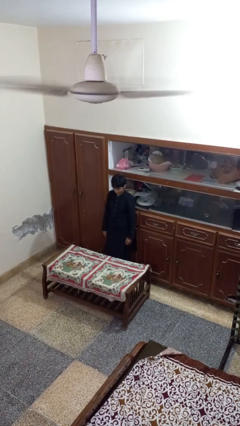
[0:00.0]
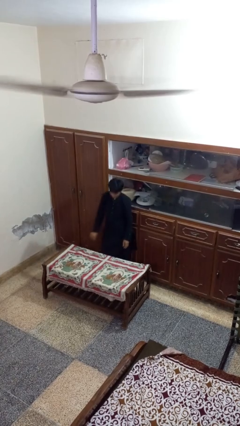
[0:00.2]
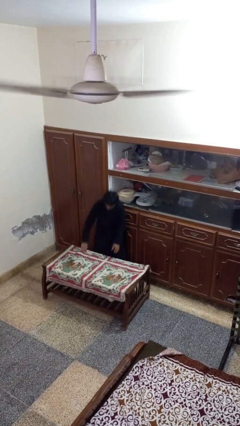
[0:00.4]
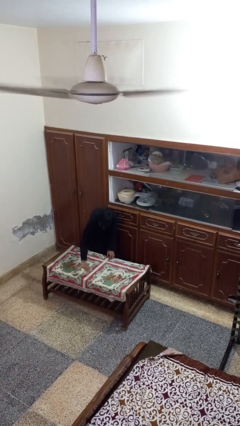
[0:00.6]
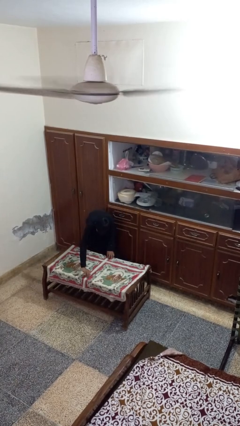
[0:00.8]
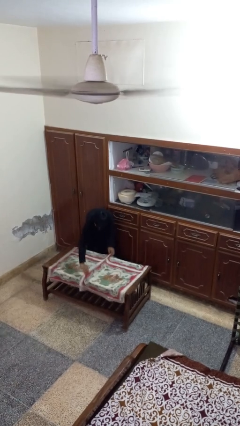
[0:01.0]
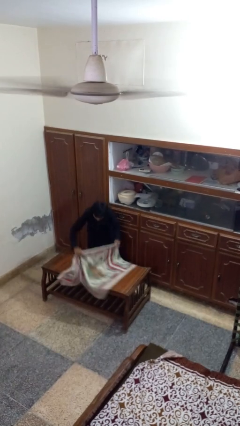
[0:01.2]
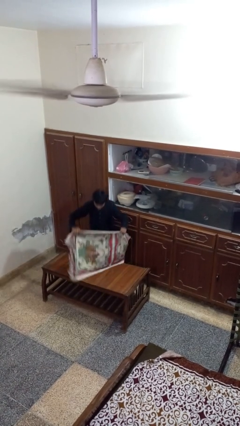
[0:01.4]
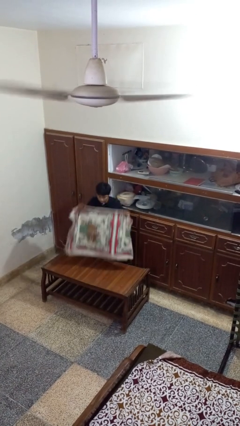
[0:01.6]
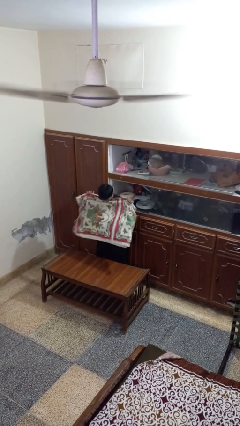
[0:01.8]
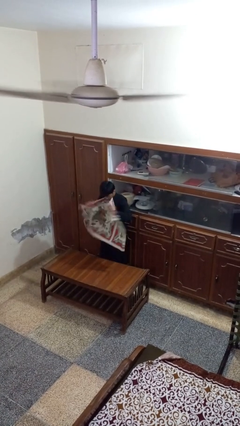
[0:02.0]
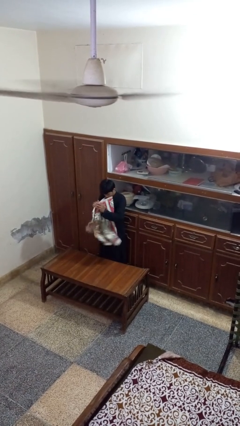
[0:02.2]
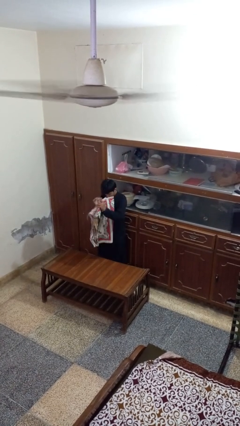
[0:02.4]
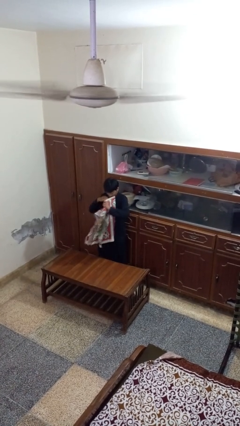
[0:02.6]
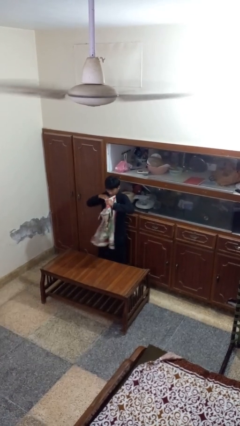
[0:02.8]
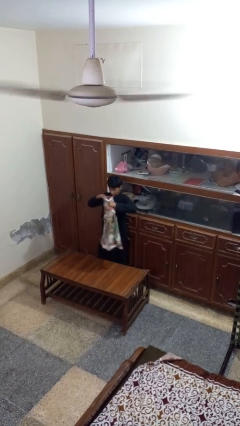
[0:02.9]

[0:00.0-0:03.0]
person folds tablecloth

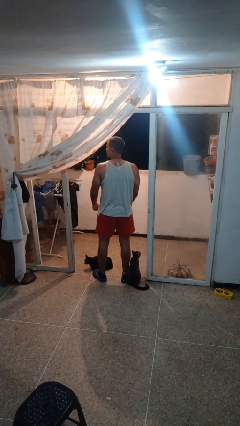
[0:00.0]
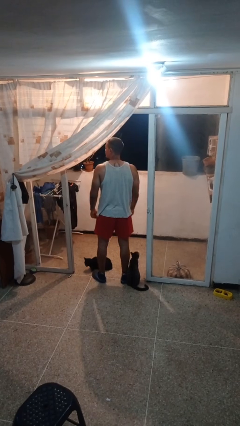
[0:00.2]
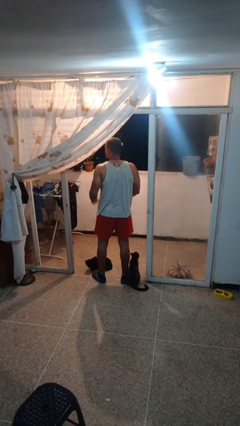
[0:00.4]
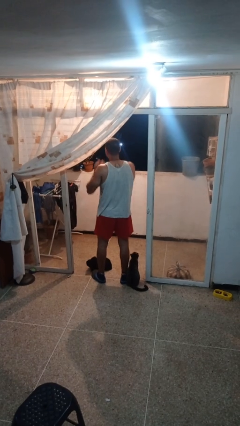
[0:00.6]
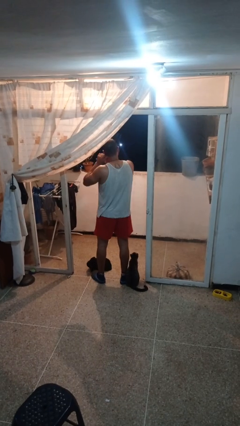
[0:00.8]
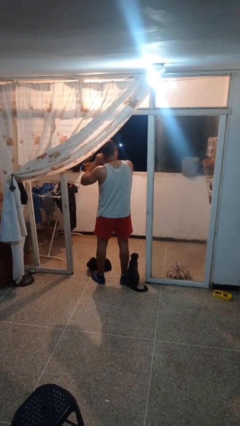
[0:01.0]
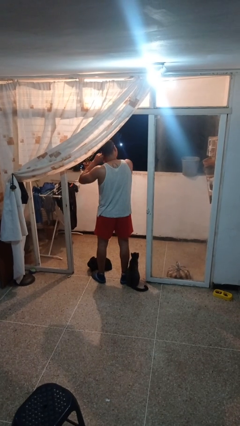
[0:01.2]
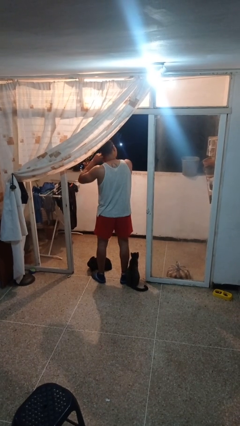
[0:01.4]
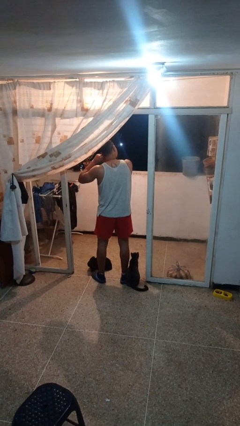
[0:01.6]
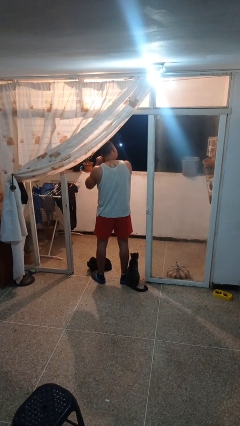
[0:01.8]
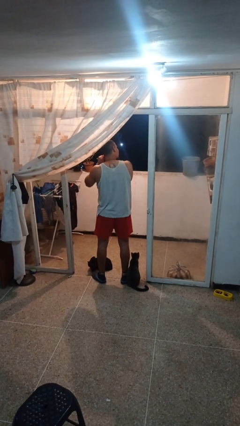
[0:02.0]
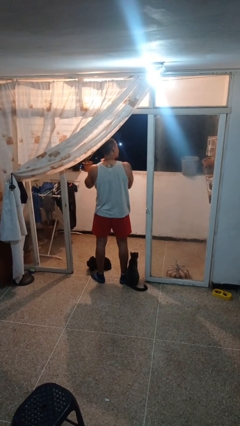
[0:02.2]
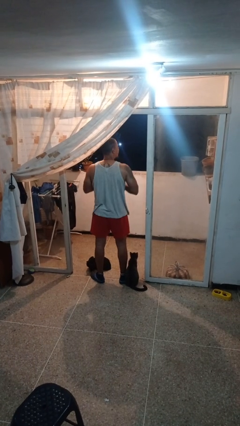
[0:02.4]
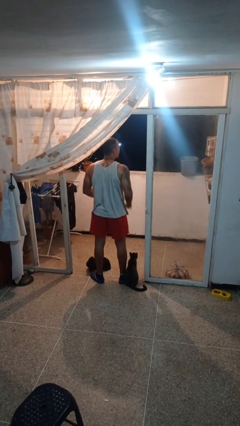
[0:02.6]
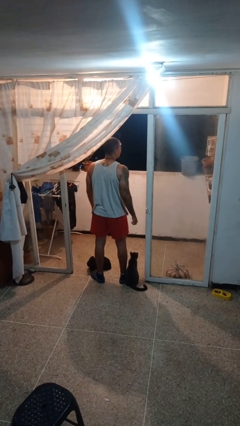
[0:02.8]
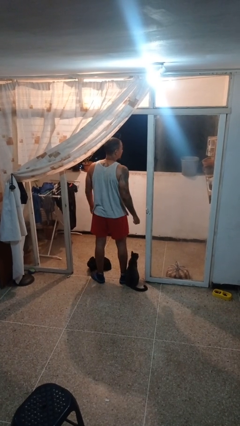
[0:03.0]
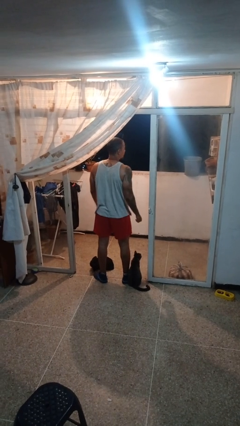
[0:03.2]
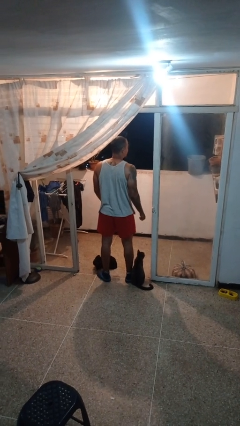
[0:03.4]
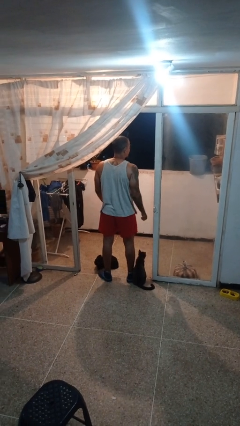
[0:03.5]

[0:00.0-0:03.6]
person takes off earrings

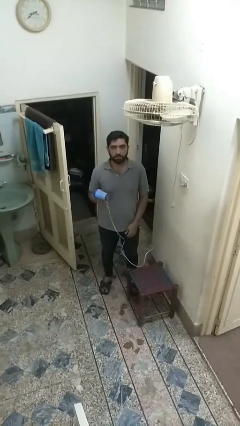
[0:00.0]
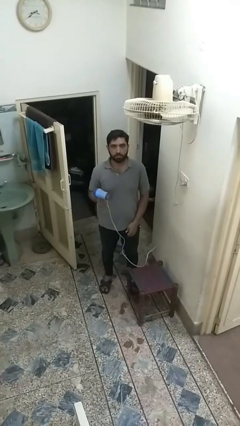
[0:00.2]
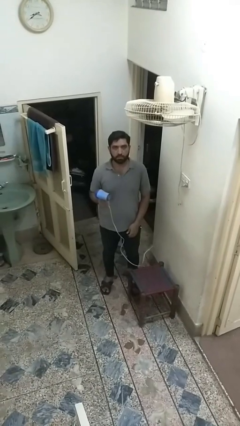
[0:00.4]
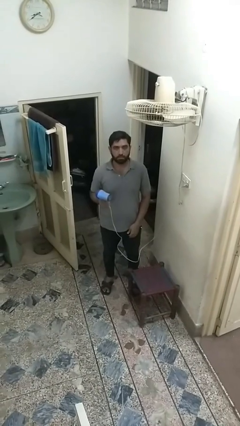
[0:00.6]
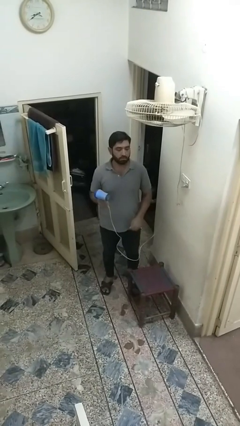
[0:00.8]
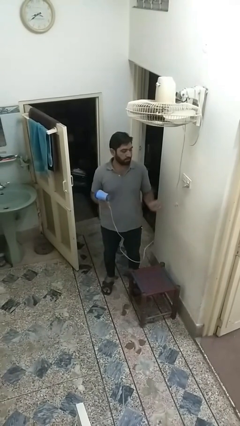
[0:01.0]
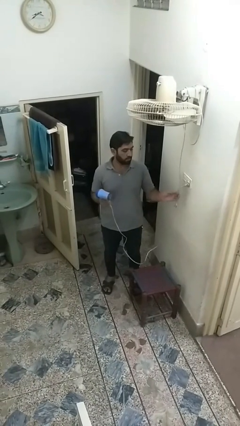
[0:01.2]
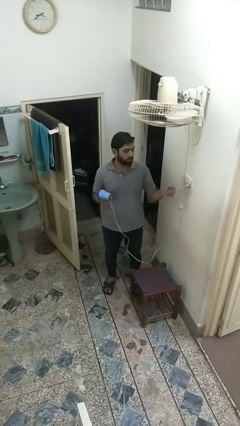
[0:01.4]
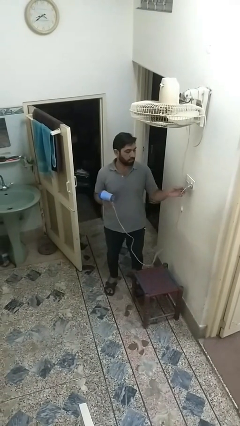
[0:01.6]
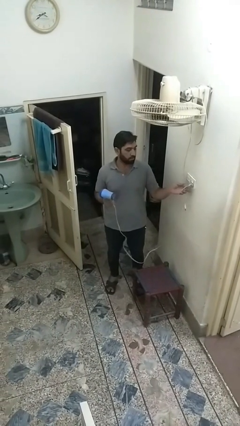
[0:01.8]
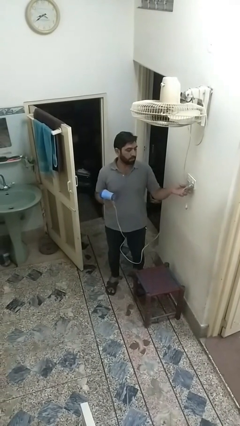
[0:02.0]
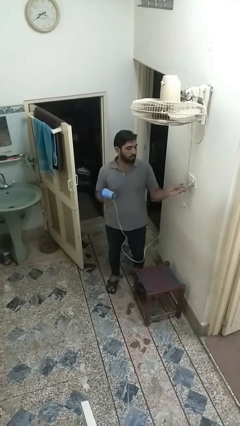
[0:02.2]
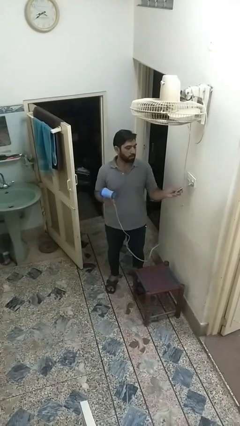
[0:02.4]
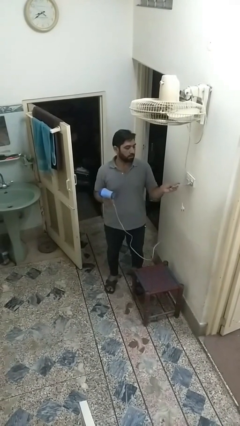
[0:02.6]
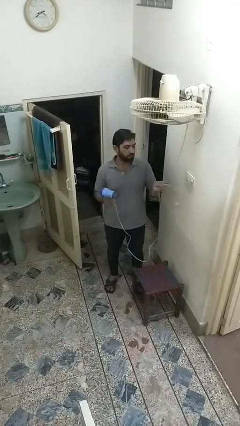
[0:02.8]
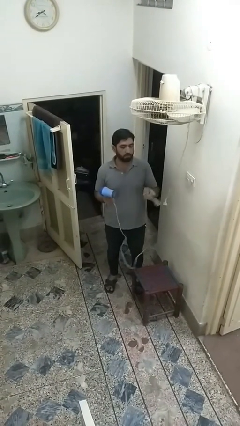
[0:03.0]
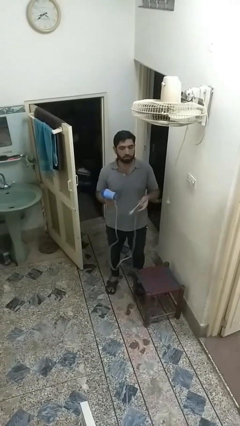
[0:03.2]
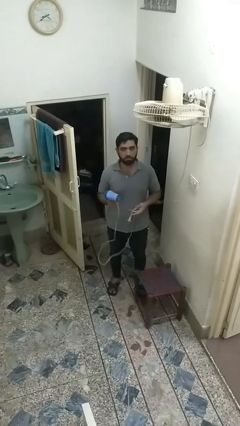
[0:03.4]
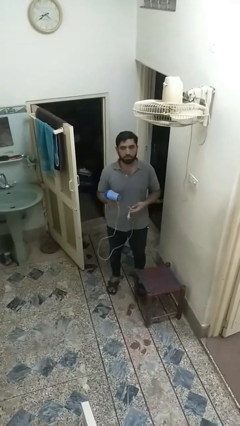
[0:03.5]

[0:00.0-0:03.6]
person unplugs from electrical socket

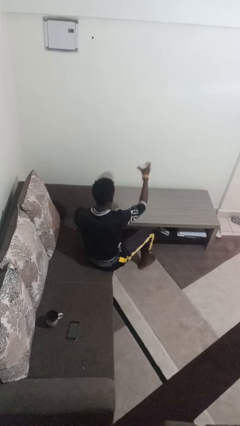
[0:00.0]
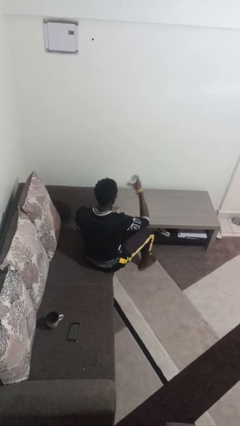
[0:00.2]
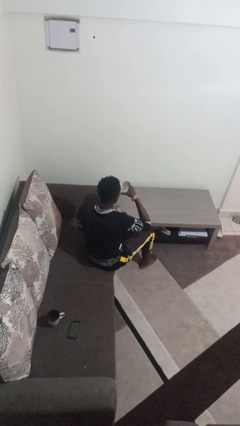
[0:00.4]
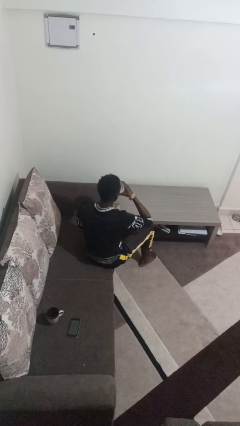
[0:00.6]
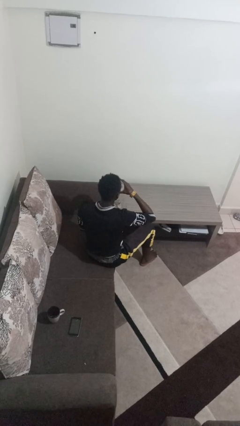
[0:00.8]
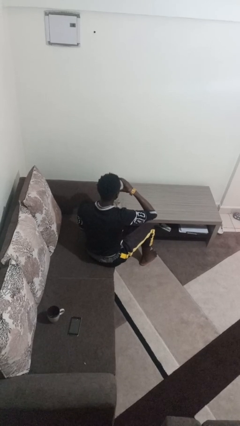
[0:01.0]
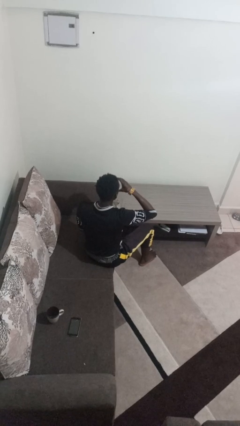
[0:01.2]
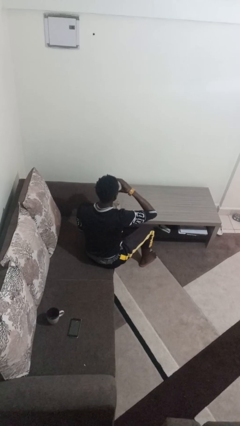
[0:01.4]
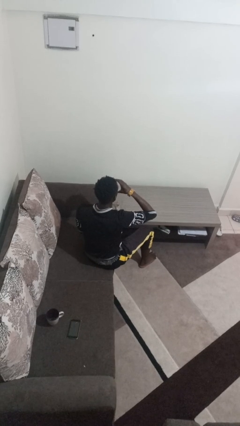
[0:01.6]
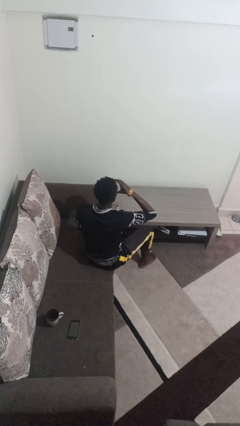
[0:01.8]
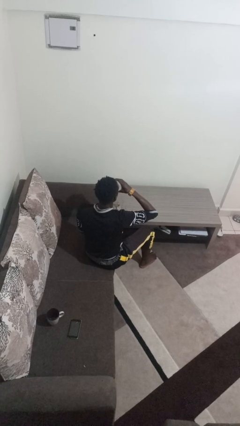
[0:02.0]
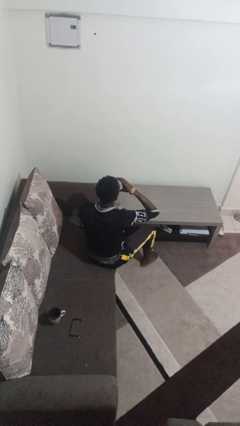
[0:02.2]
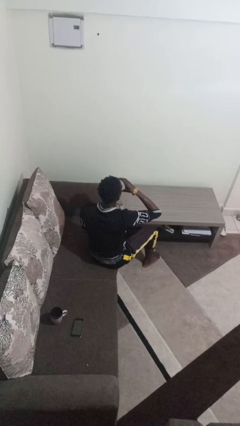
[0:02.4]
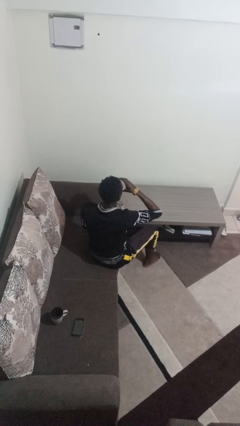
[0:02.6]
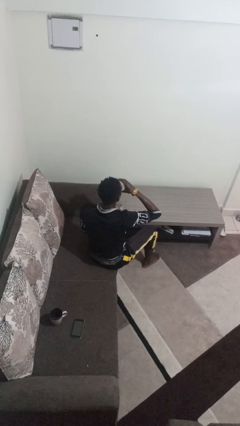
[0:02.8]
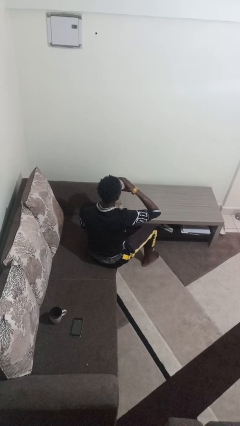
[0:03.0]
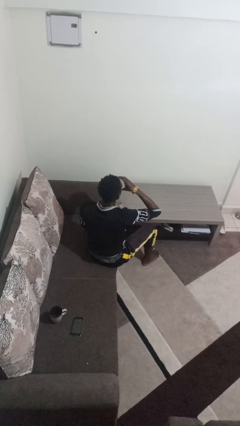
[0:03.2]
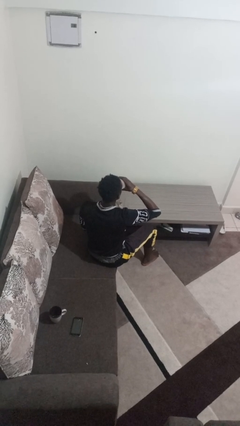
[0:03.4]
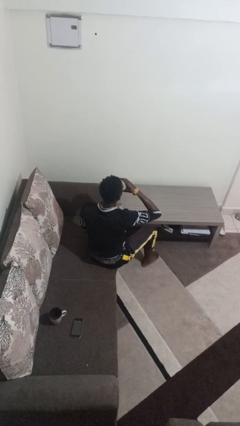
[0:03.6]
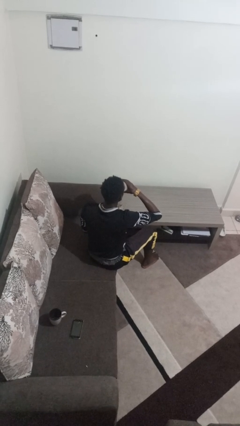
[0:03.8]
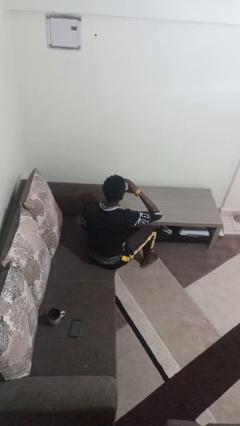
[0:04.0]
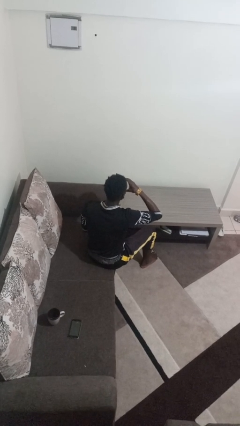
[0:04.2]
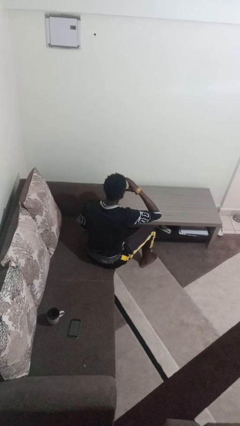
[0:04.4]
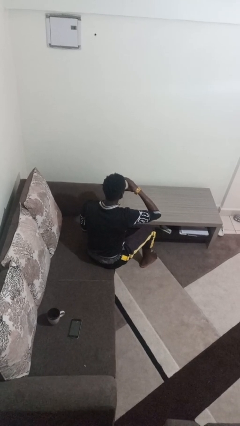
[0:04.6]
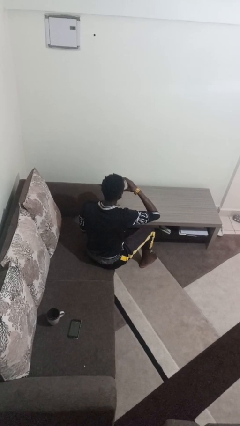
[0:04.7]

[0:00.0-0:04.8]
person drinks from shotglass

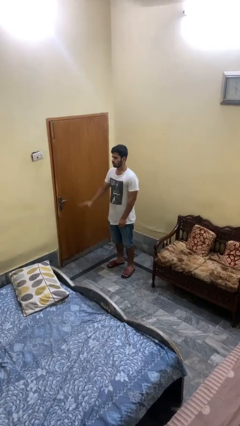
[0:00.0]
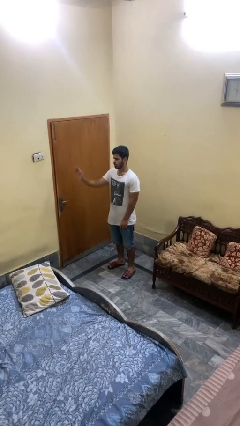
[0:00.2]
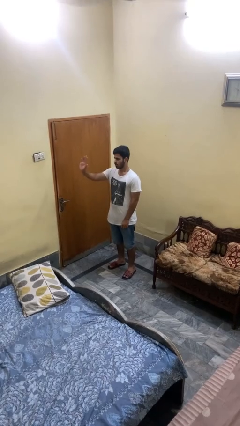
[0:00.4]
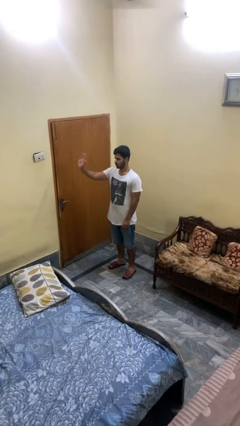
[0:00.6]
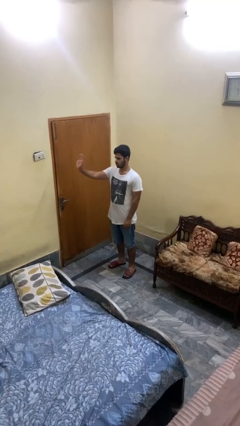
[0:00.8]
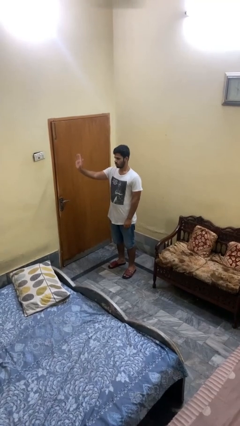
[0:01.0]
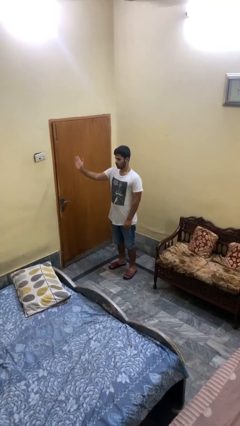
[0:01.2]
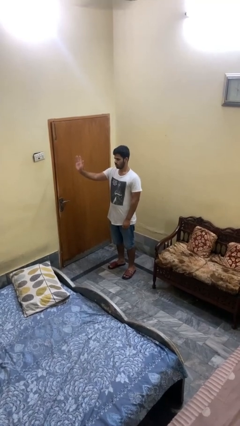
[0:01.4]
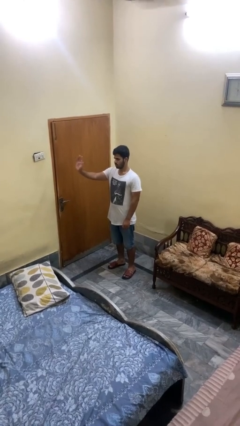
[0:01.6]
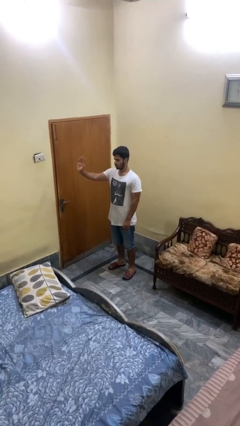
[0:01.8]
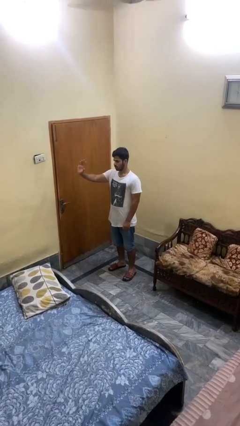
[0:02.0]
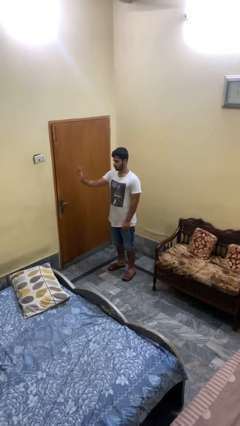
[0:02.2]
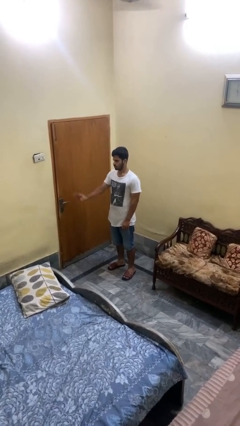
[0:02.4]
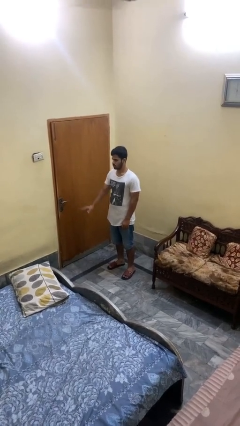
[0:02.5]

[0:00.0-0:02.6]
person waves at person

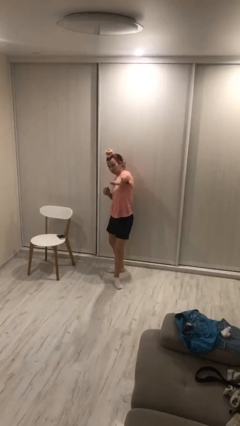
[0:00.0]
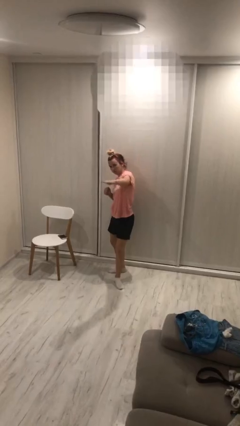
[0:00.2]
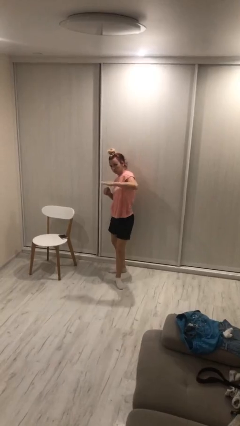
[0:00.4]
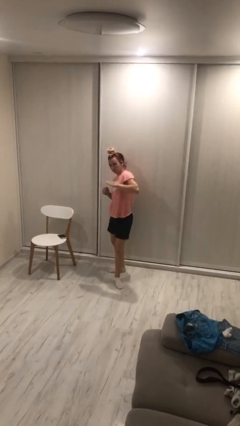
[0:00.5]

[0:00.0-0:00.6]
person karate chop
